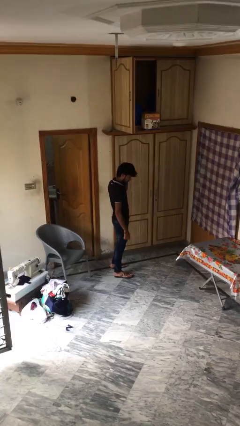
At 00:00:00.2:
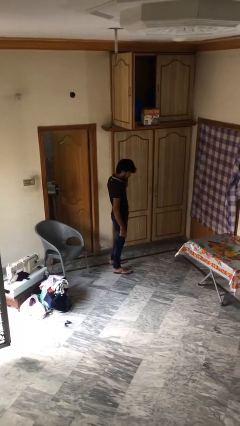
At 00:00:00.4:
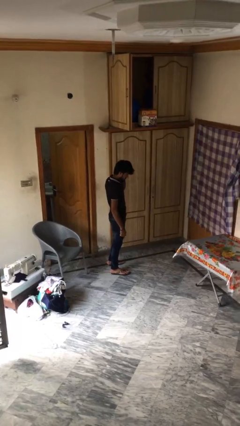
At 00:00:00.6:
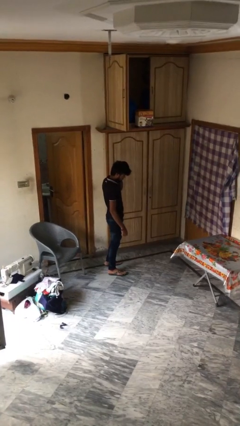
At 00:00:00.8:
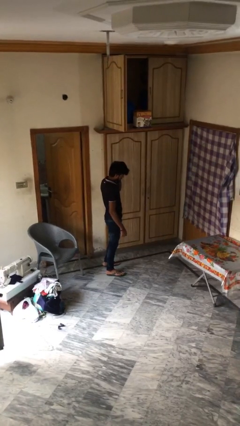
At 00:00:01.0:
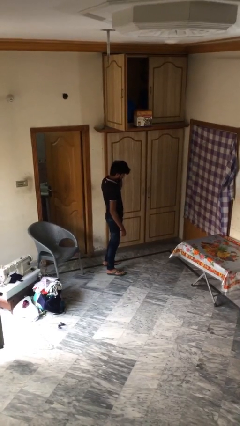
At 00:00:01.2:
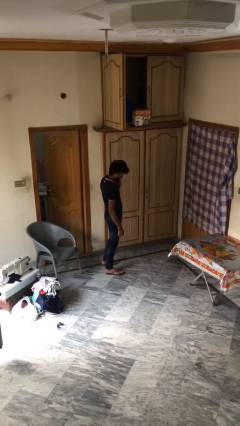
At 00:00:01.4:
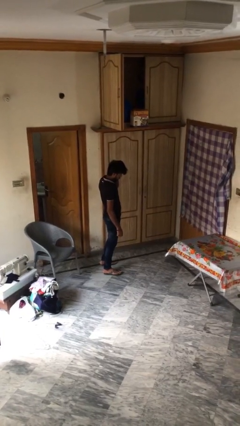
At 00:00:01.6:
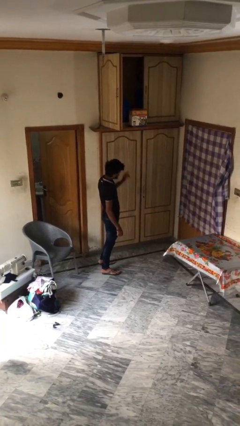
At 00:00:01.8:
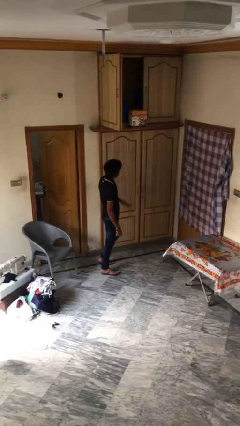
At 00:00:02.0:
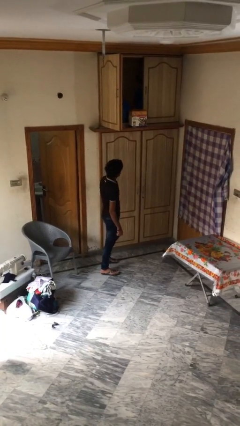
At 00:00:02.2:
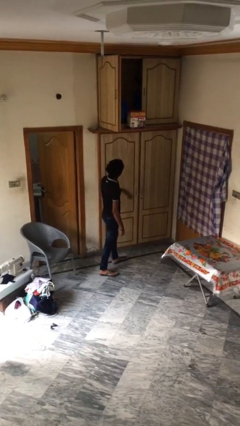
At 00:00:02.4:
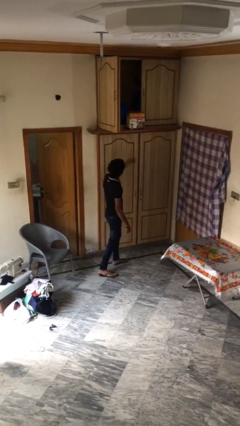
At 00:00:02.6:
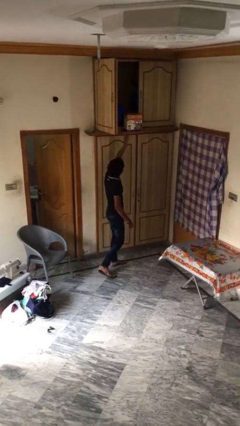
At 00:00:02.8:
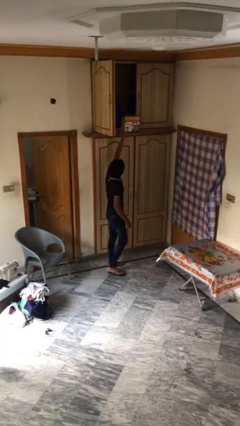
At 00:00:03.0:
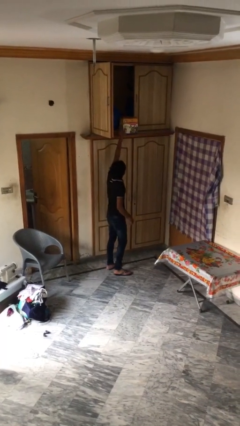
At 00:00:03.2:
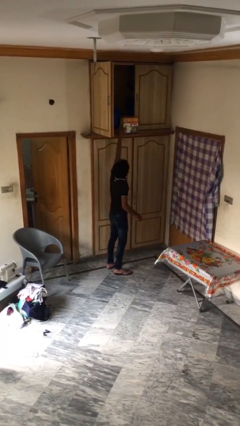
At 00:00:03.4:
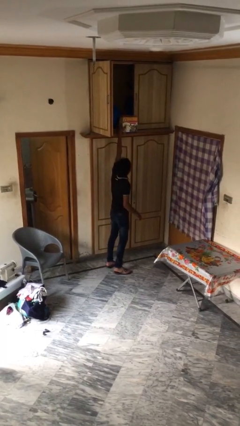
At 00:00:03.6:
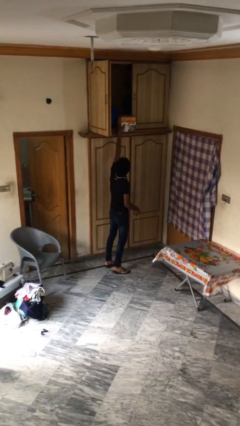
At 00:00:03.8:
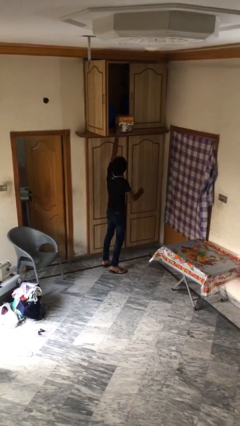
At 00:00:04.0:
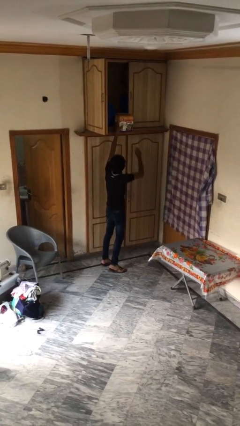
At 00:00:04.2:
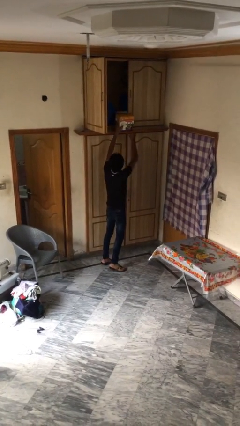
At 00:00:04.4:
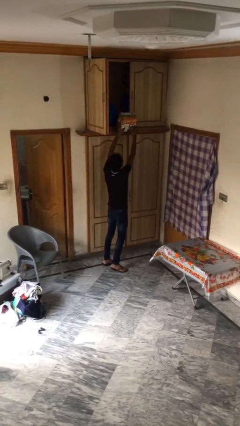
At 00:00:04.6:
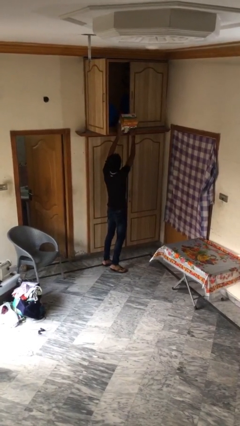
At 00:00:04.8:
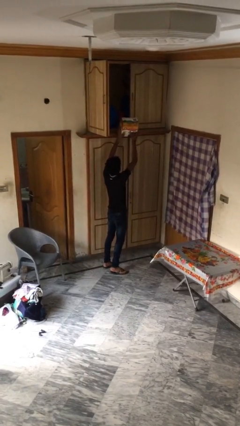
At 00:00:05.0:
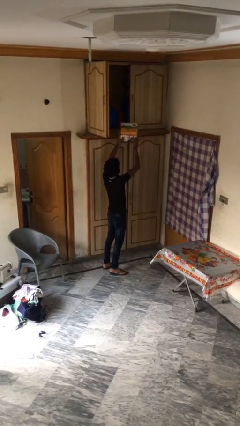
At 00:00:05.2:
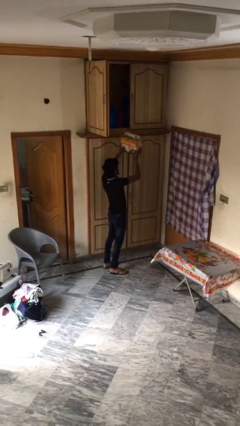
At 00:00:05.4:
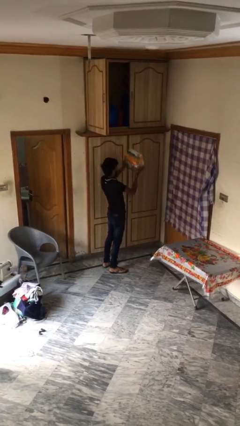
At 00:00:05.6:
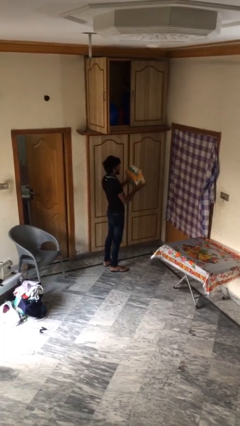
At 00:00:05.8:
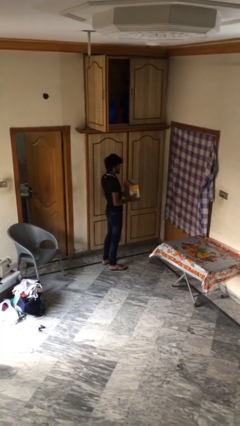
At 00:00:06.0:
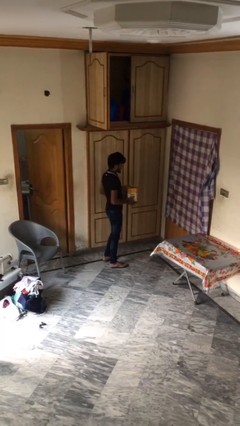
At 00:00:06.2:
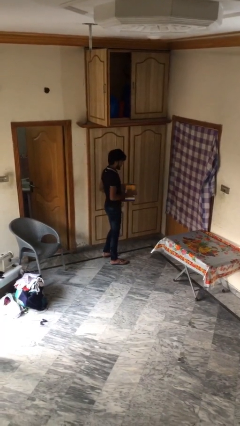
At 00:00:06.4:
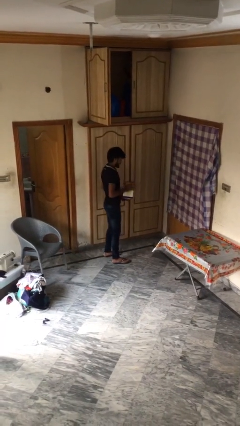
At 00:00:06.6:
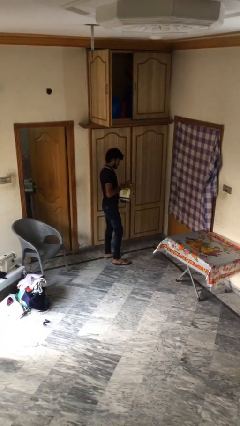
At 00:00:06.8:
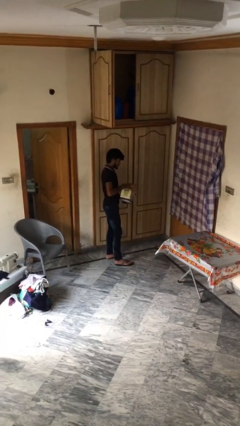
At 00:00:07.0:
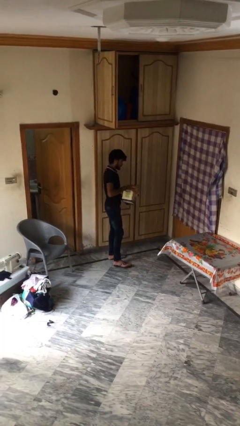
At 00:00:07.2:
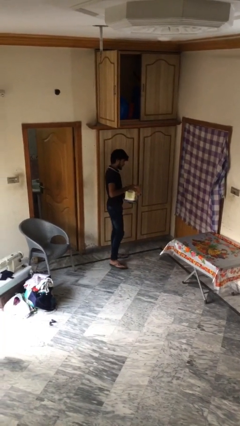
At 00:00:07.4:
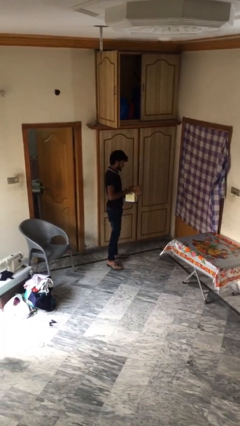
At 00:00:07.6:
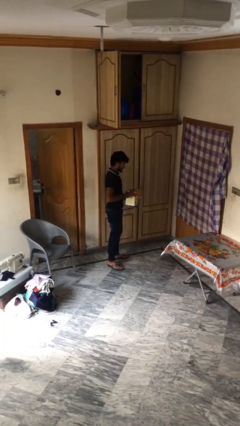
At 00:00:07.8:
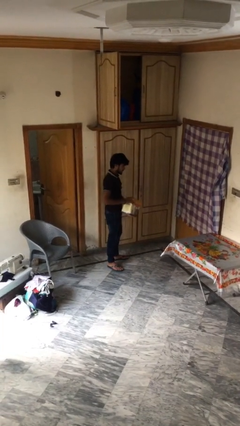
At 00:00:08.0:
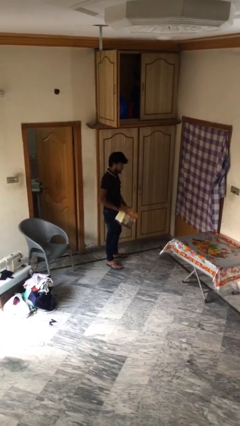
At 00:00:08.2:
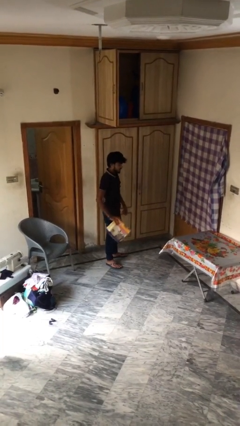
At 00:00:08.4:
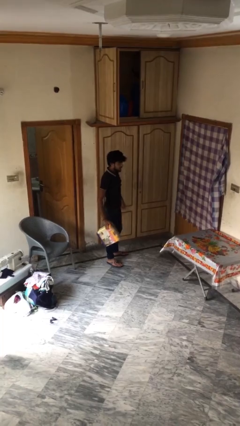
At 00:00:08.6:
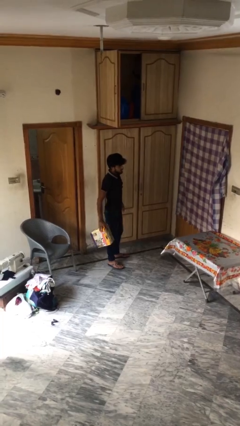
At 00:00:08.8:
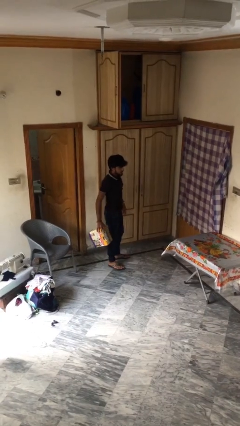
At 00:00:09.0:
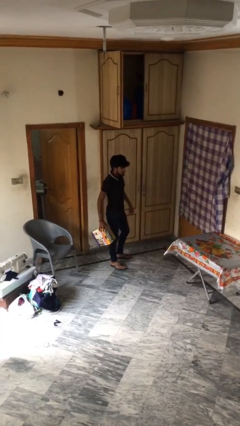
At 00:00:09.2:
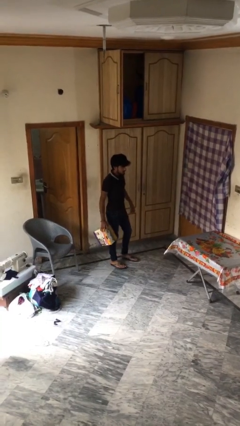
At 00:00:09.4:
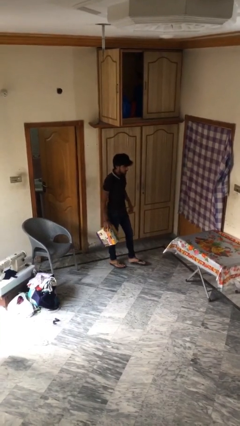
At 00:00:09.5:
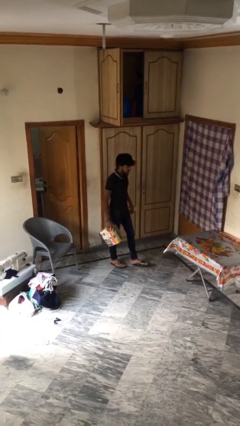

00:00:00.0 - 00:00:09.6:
person picks up object from shelf

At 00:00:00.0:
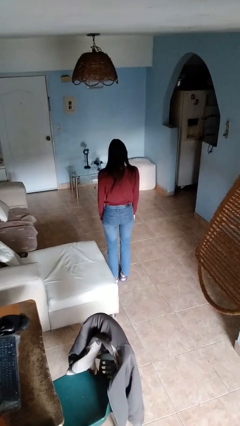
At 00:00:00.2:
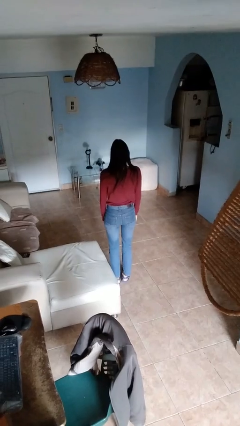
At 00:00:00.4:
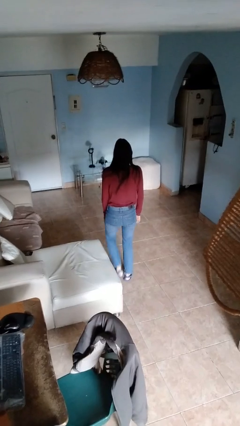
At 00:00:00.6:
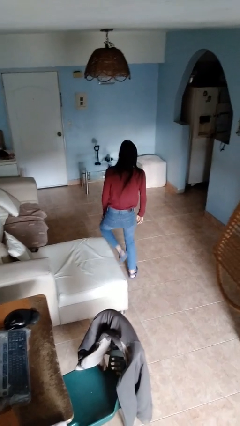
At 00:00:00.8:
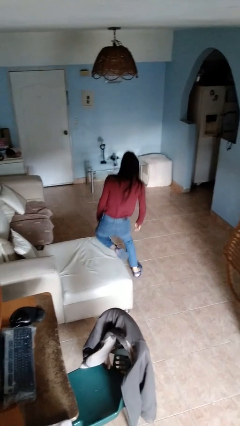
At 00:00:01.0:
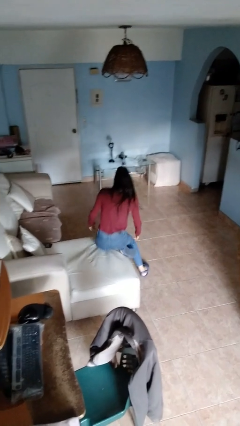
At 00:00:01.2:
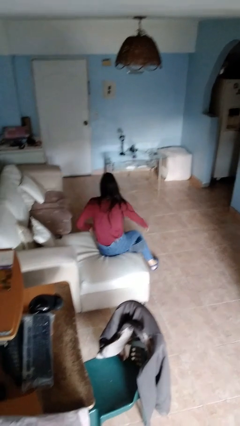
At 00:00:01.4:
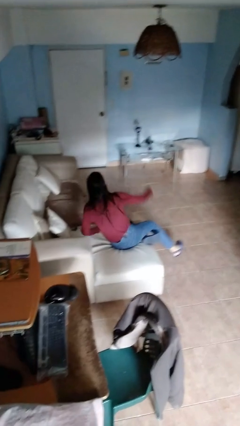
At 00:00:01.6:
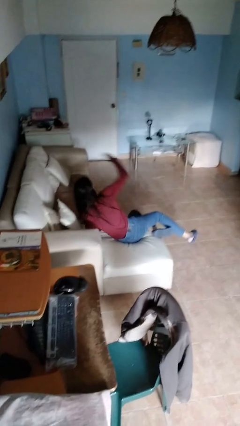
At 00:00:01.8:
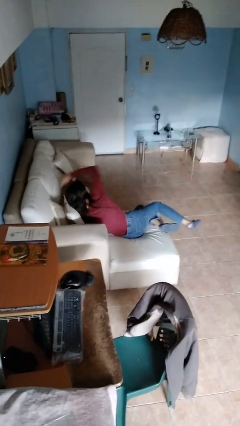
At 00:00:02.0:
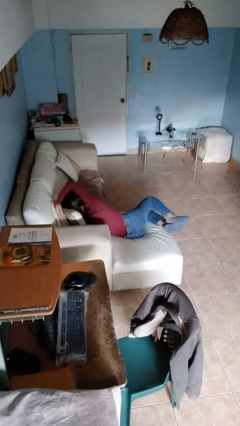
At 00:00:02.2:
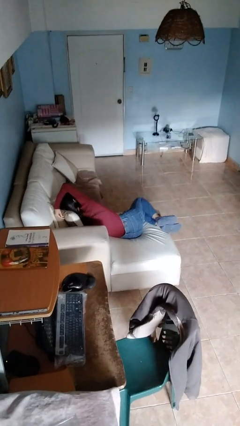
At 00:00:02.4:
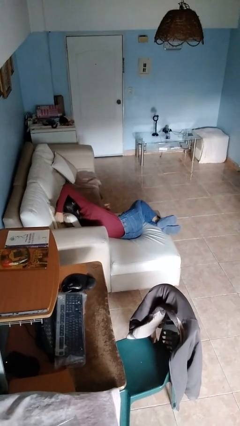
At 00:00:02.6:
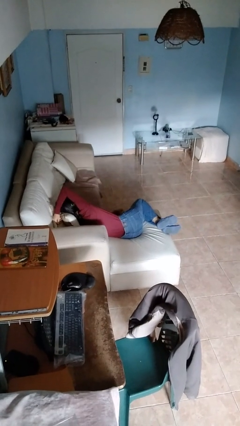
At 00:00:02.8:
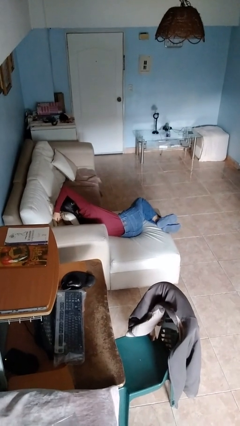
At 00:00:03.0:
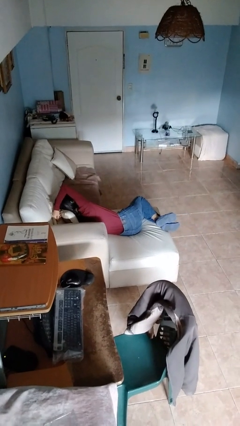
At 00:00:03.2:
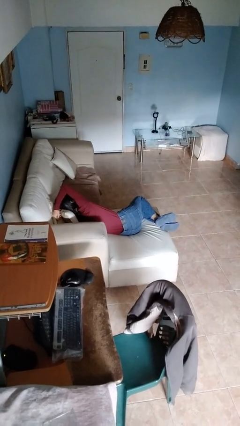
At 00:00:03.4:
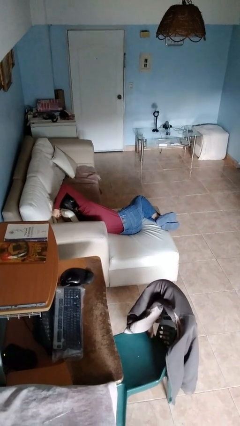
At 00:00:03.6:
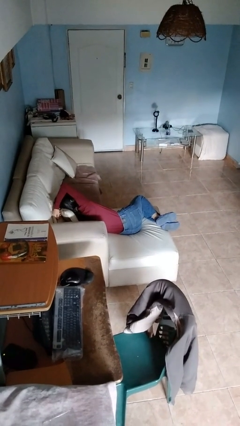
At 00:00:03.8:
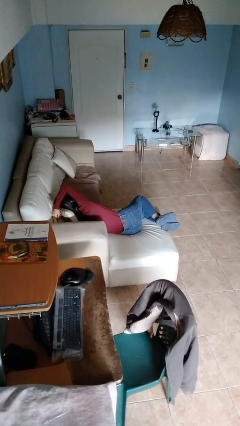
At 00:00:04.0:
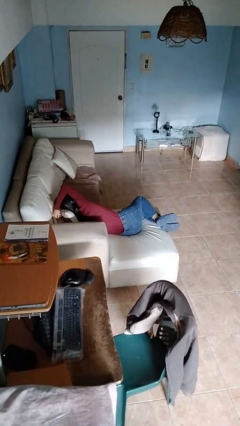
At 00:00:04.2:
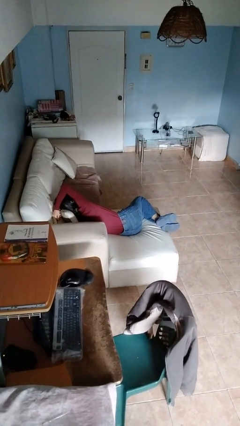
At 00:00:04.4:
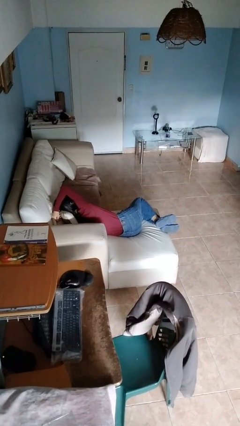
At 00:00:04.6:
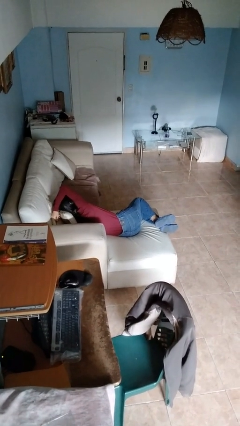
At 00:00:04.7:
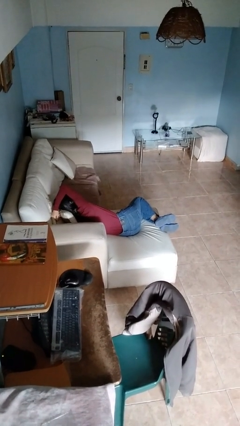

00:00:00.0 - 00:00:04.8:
person lies down on couch

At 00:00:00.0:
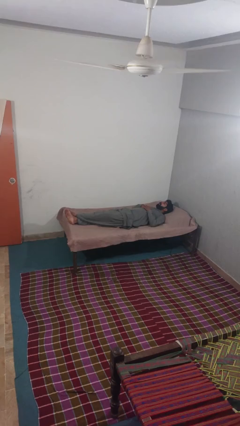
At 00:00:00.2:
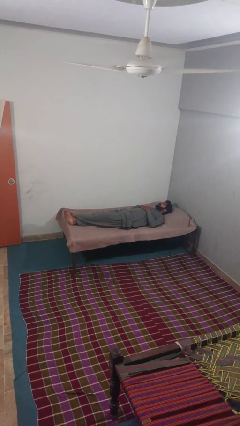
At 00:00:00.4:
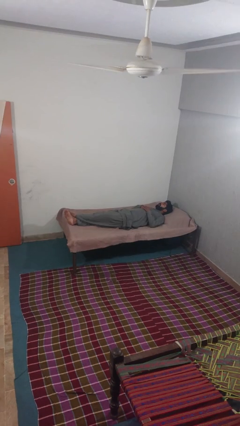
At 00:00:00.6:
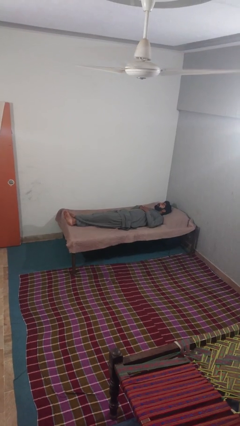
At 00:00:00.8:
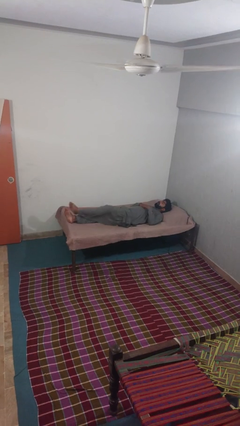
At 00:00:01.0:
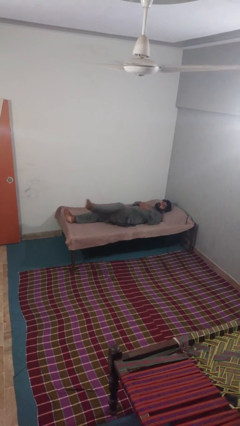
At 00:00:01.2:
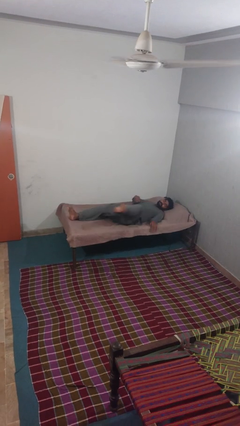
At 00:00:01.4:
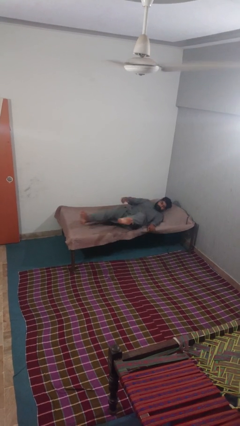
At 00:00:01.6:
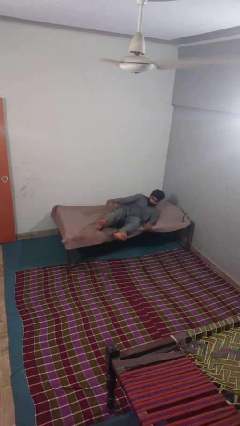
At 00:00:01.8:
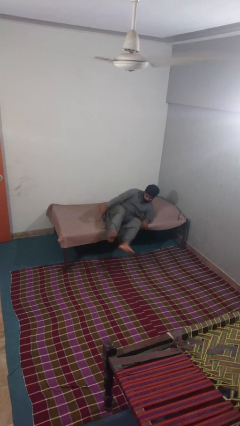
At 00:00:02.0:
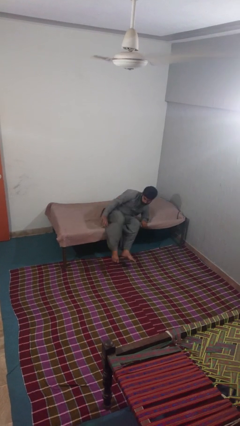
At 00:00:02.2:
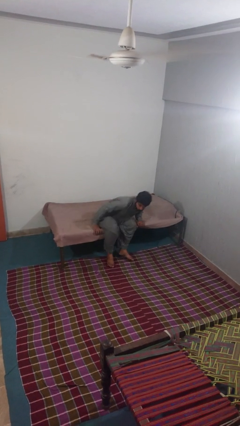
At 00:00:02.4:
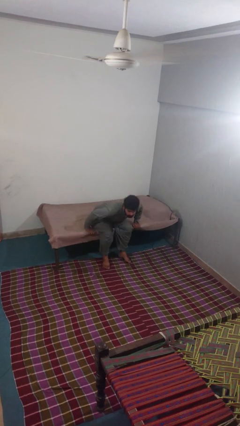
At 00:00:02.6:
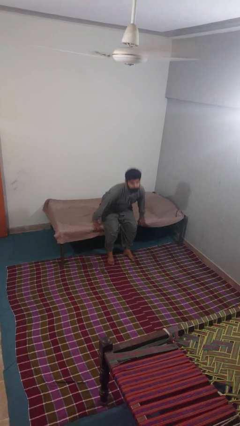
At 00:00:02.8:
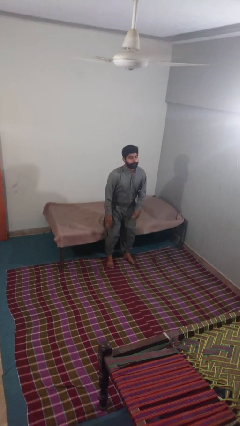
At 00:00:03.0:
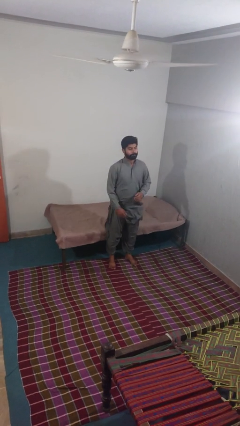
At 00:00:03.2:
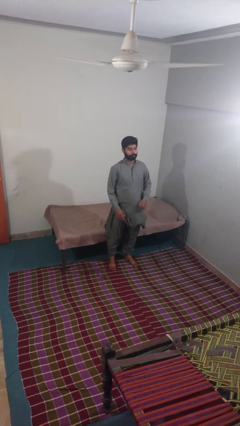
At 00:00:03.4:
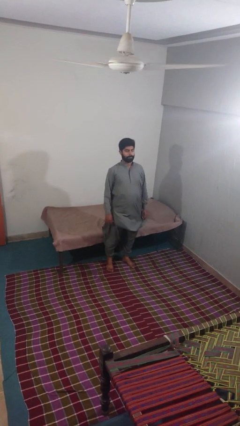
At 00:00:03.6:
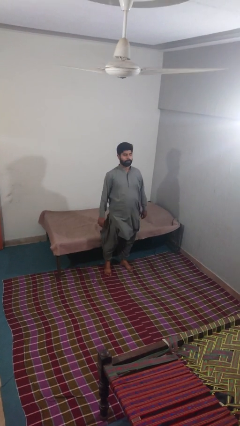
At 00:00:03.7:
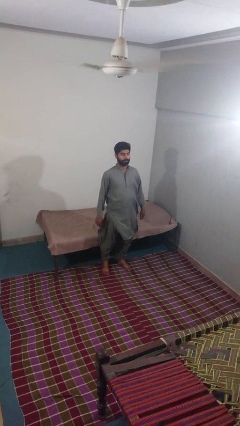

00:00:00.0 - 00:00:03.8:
person stands up
